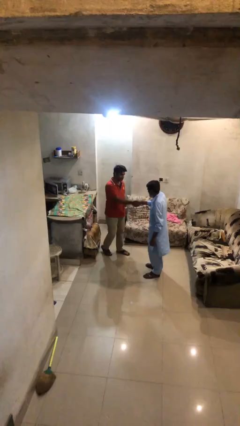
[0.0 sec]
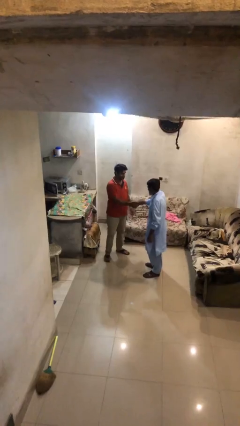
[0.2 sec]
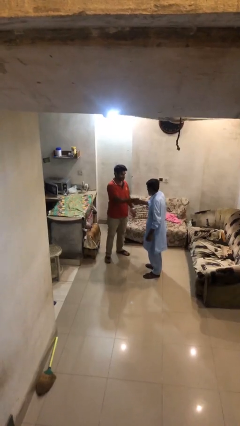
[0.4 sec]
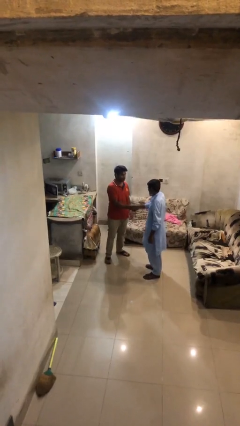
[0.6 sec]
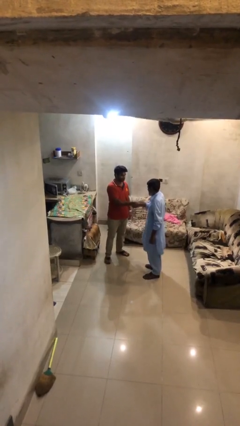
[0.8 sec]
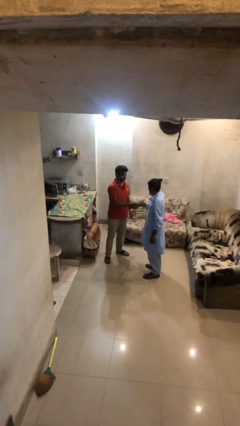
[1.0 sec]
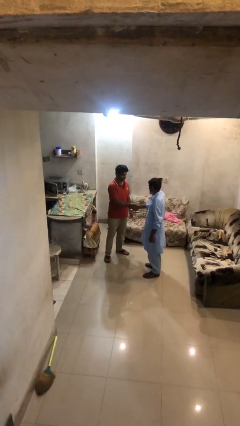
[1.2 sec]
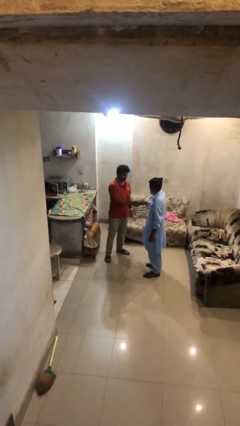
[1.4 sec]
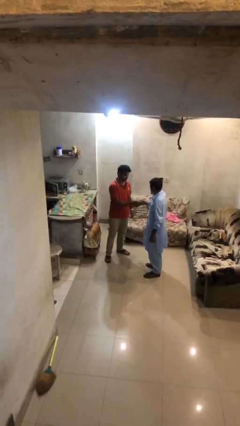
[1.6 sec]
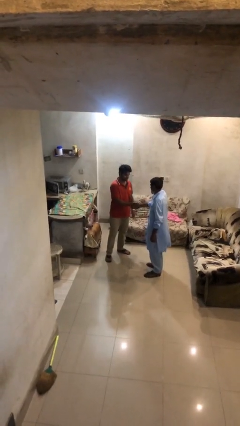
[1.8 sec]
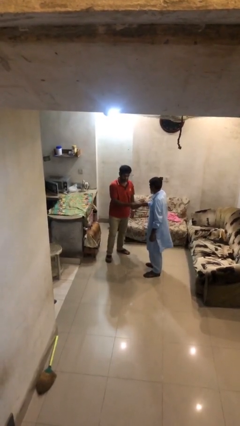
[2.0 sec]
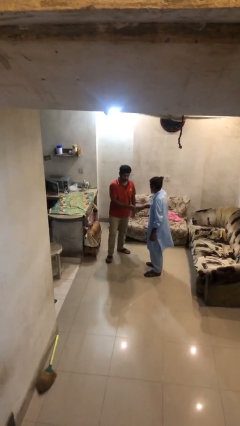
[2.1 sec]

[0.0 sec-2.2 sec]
person shakes hand

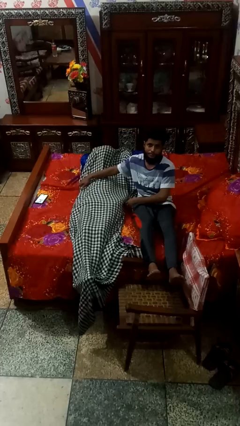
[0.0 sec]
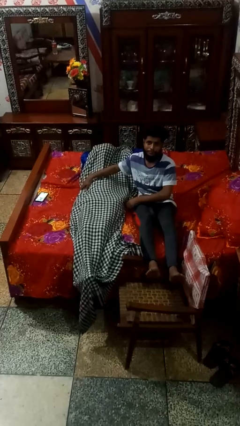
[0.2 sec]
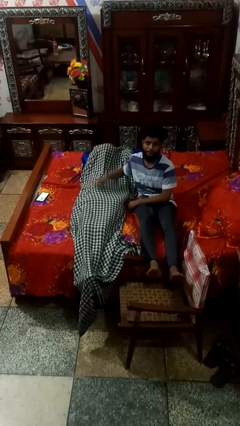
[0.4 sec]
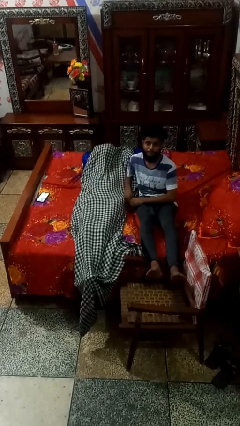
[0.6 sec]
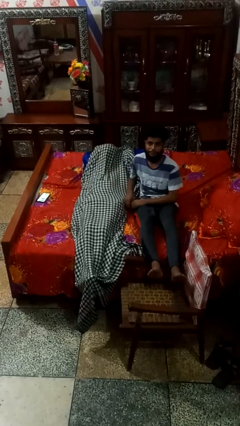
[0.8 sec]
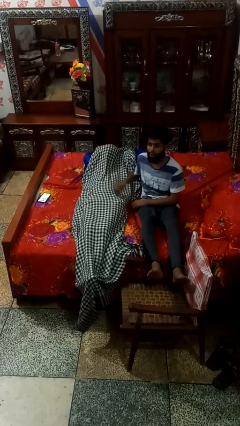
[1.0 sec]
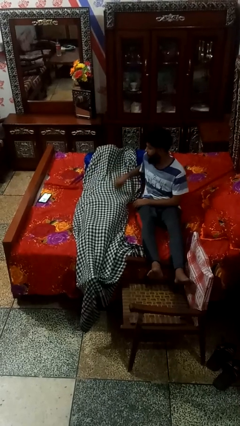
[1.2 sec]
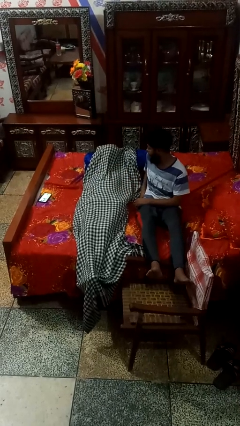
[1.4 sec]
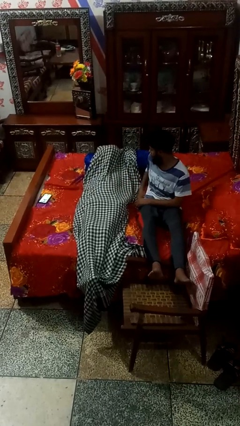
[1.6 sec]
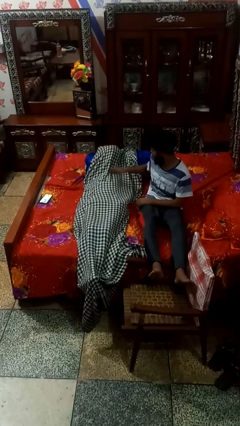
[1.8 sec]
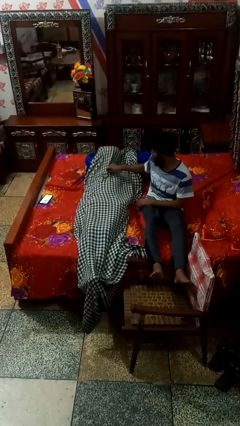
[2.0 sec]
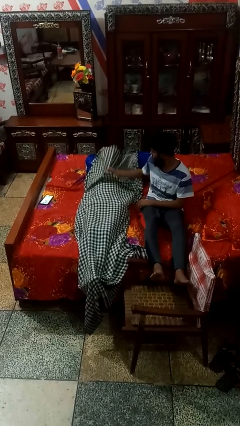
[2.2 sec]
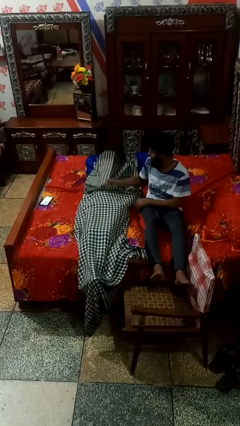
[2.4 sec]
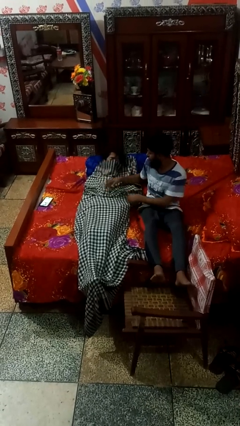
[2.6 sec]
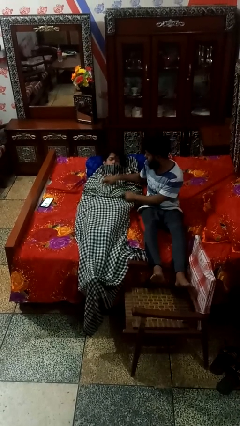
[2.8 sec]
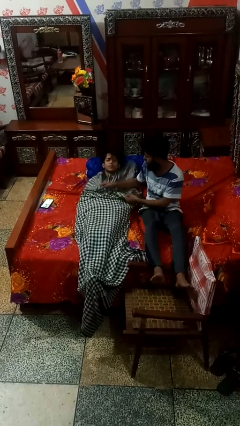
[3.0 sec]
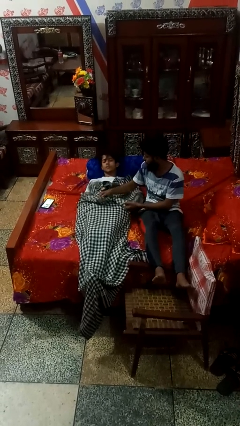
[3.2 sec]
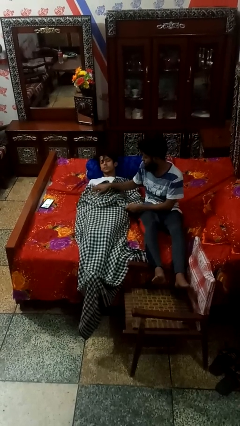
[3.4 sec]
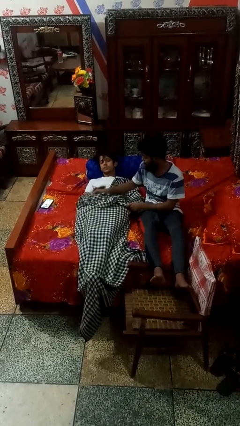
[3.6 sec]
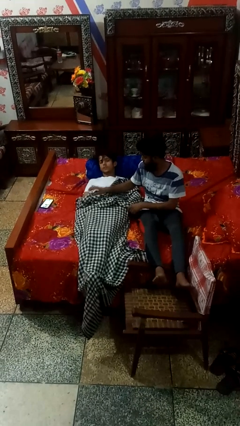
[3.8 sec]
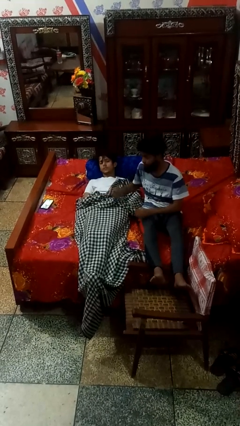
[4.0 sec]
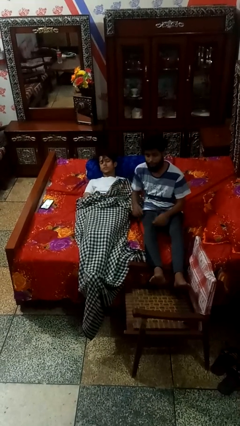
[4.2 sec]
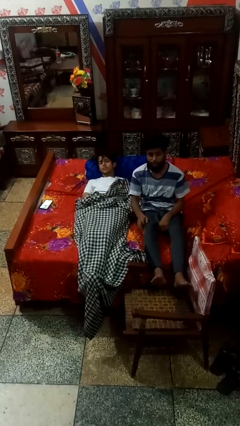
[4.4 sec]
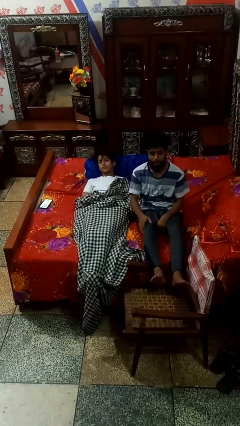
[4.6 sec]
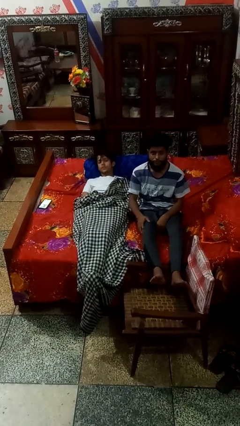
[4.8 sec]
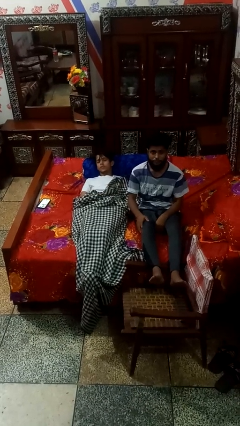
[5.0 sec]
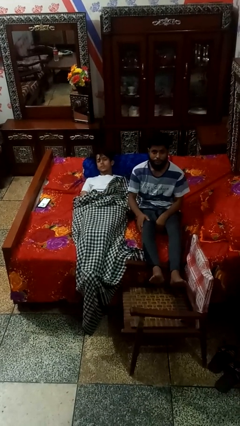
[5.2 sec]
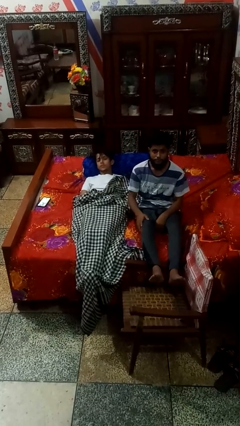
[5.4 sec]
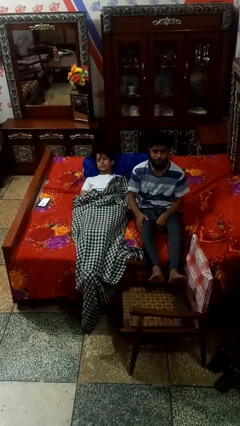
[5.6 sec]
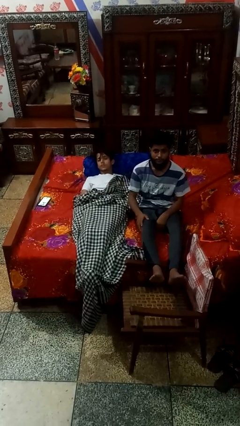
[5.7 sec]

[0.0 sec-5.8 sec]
person uncovers friend with blanket

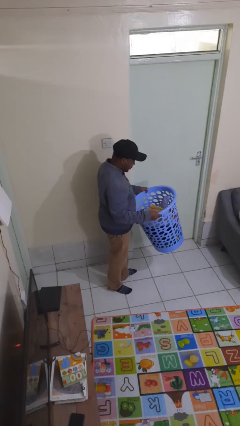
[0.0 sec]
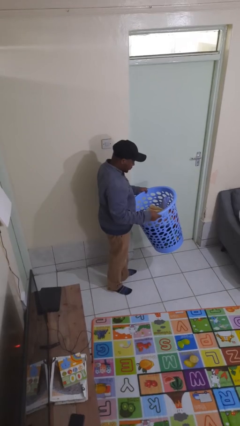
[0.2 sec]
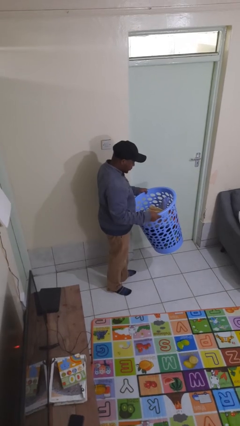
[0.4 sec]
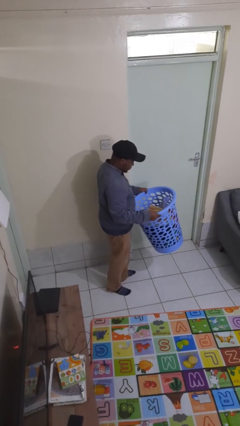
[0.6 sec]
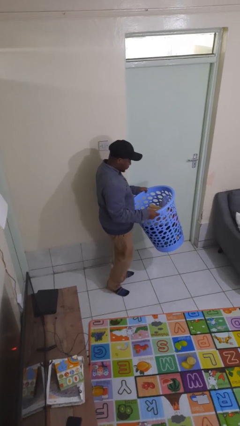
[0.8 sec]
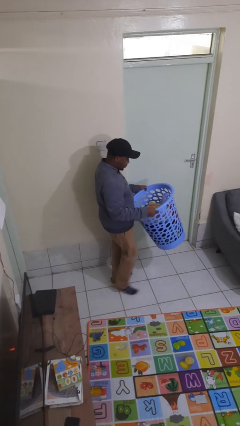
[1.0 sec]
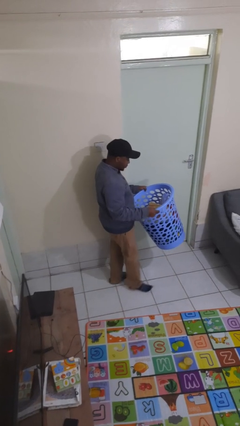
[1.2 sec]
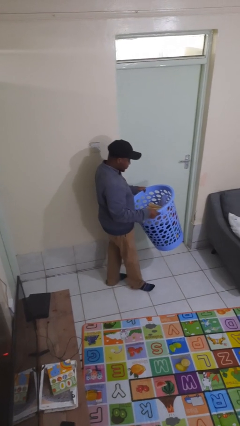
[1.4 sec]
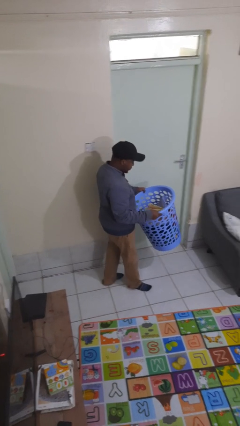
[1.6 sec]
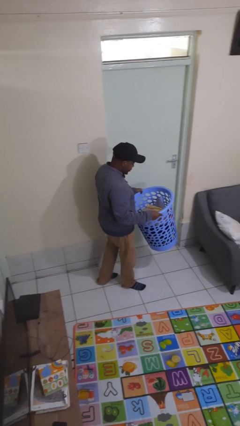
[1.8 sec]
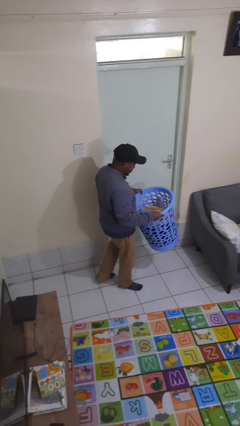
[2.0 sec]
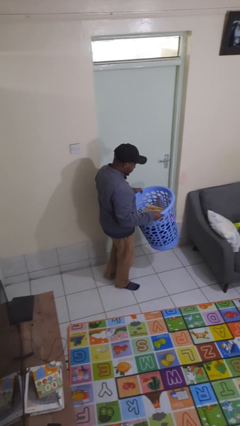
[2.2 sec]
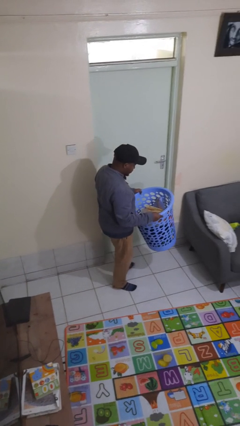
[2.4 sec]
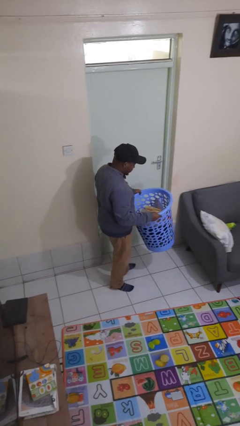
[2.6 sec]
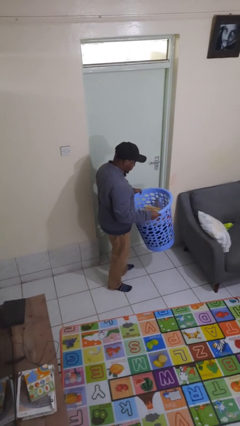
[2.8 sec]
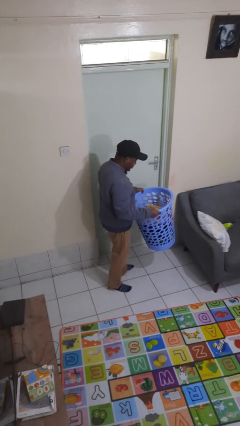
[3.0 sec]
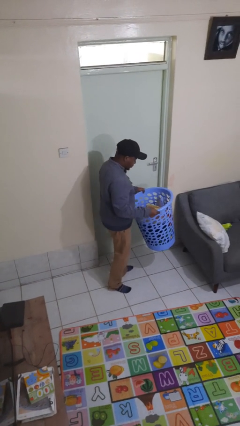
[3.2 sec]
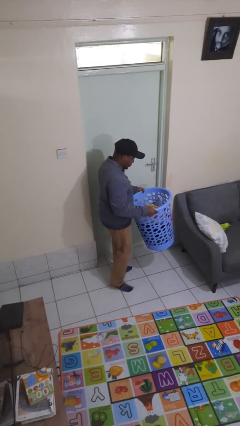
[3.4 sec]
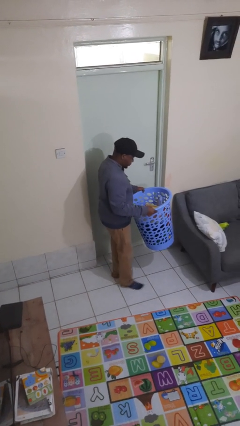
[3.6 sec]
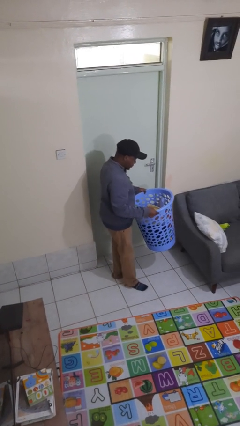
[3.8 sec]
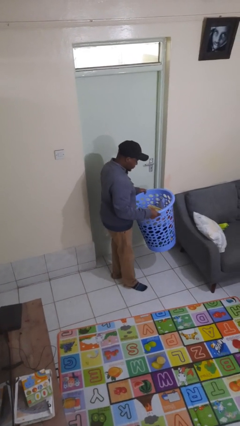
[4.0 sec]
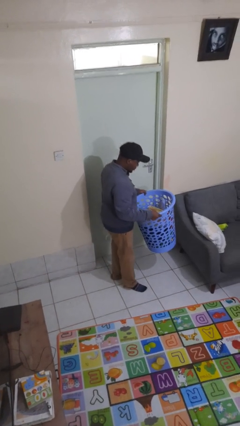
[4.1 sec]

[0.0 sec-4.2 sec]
person carries laundry basket

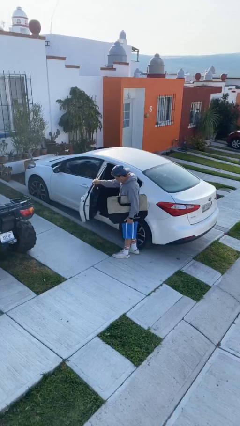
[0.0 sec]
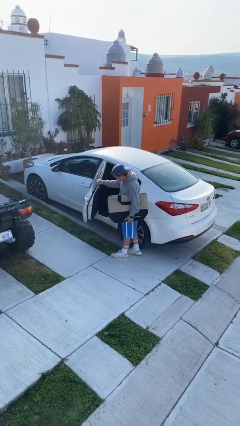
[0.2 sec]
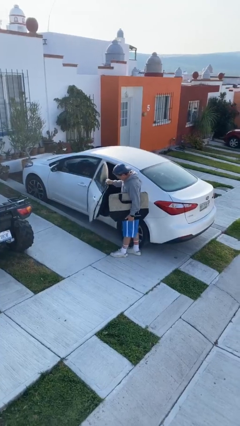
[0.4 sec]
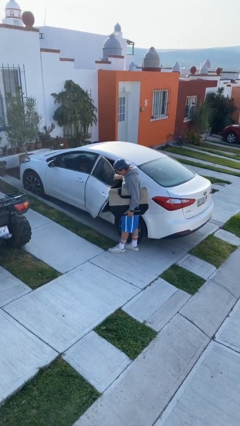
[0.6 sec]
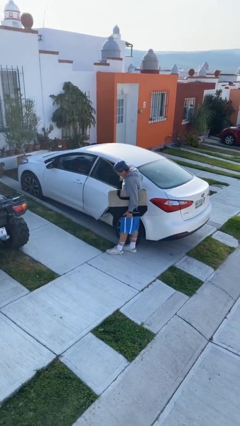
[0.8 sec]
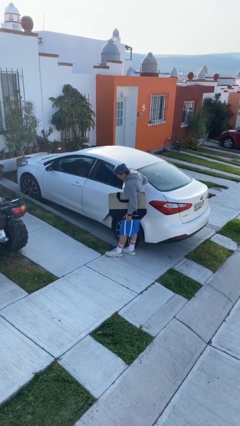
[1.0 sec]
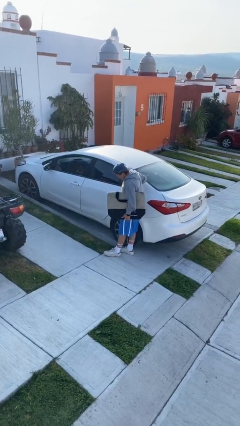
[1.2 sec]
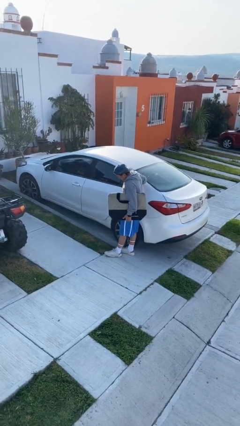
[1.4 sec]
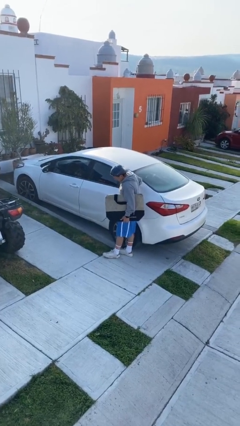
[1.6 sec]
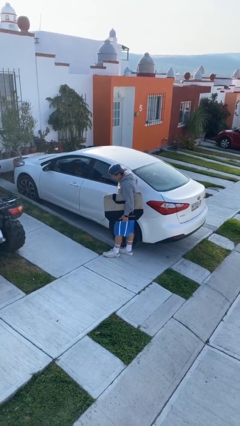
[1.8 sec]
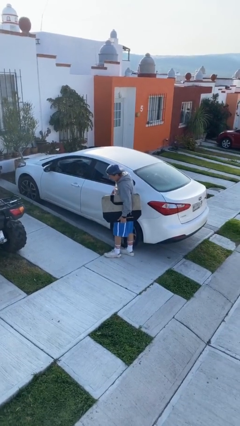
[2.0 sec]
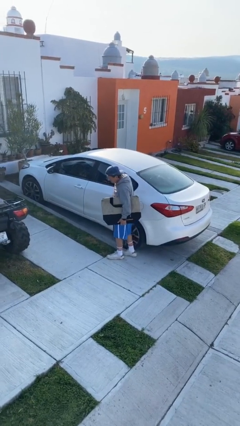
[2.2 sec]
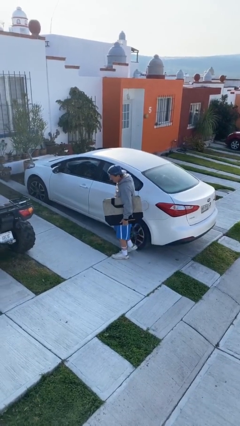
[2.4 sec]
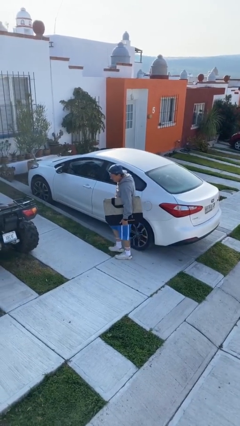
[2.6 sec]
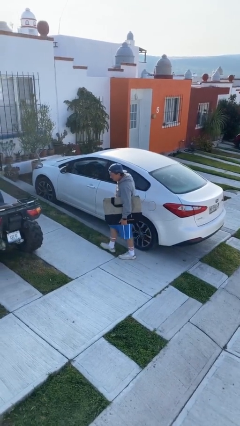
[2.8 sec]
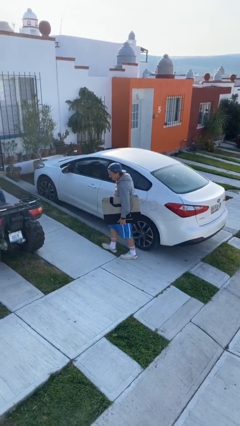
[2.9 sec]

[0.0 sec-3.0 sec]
person closes car door

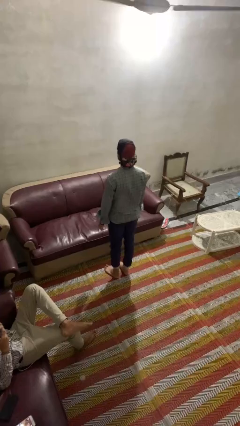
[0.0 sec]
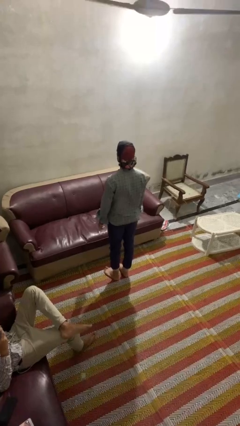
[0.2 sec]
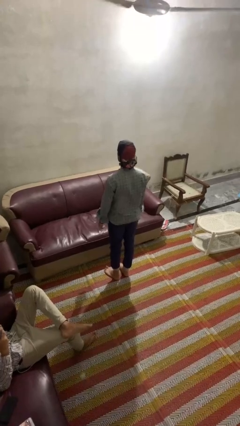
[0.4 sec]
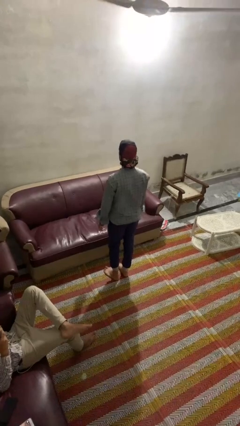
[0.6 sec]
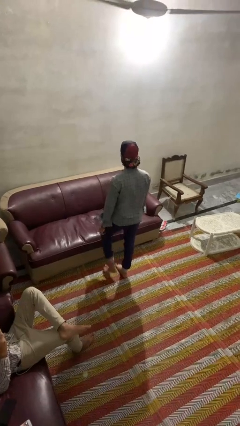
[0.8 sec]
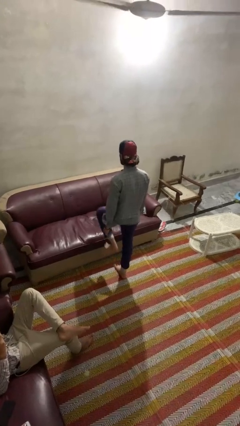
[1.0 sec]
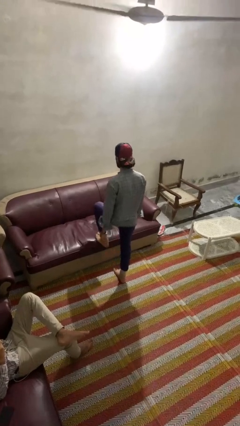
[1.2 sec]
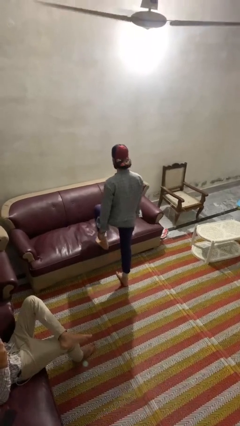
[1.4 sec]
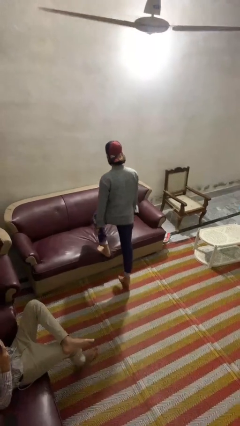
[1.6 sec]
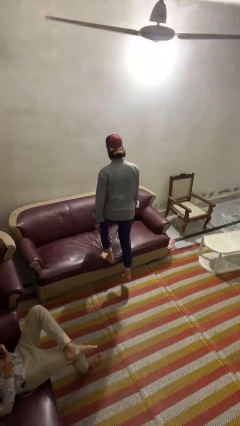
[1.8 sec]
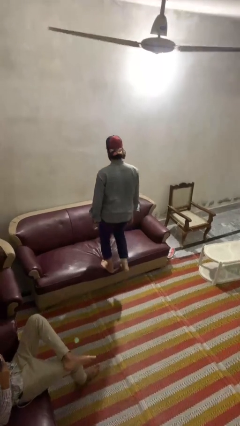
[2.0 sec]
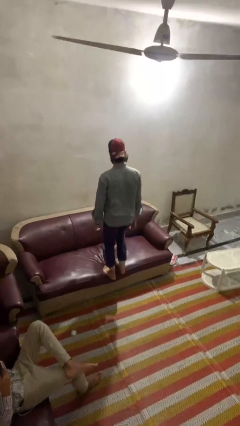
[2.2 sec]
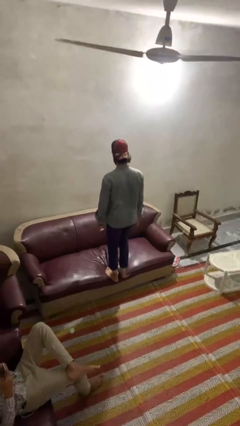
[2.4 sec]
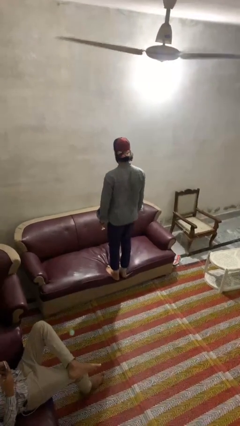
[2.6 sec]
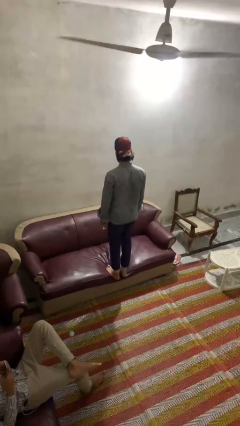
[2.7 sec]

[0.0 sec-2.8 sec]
person climbs on couch
